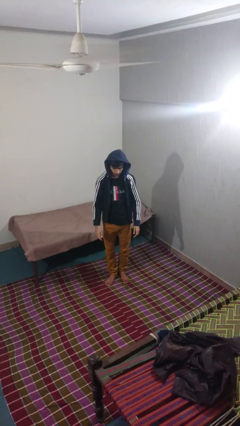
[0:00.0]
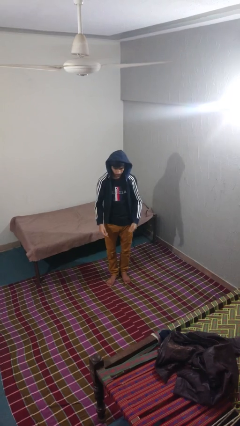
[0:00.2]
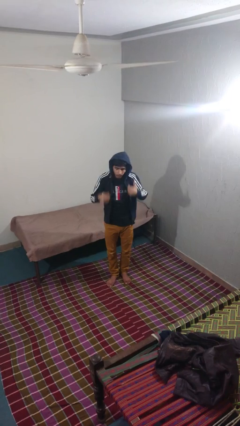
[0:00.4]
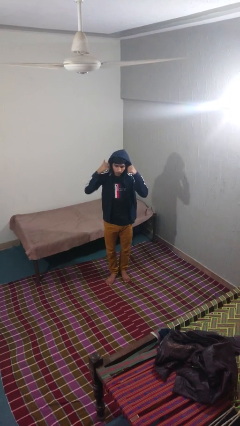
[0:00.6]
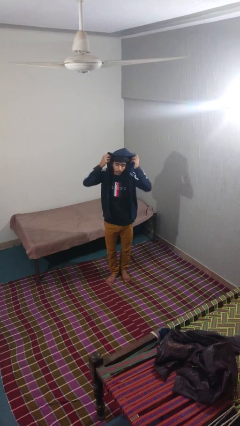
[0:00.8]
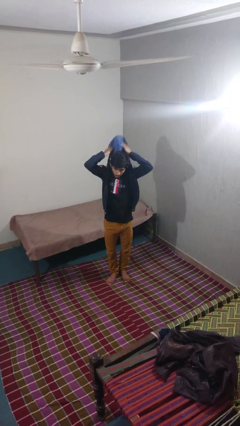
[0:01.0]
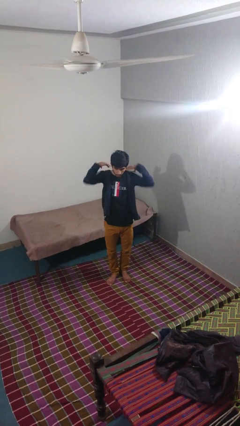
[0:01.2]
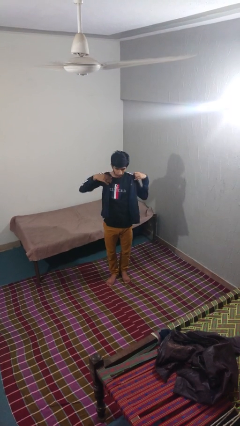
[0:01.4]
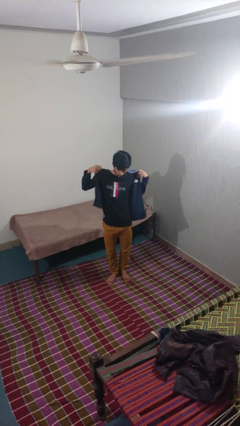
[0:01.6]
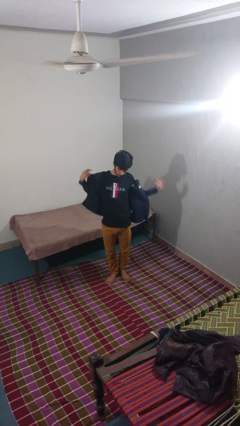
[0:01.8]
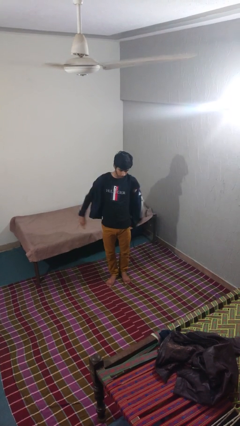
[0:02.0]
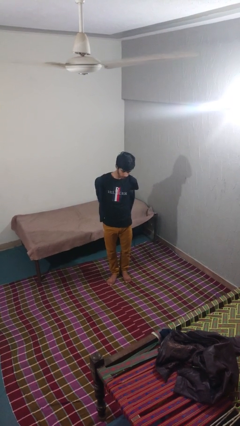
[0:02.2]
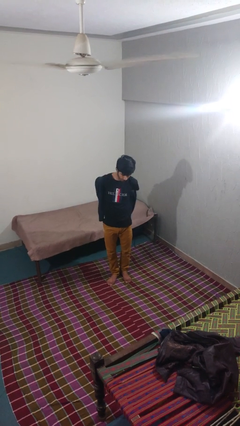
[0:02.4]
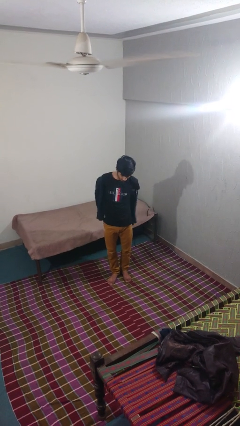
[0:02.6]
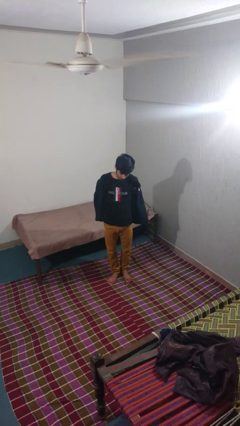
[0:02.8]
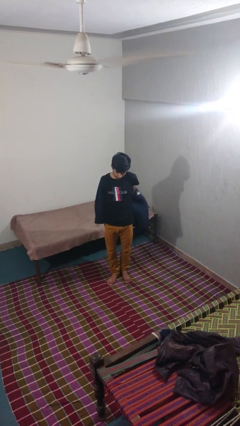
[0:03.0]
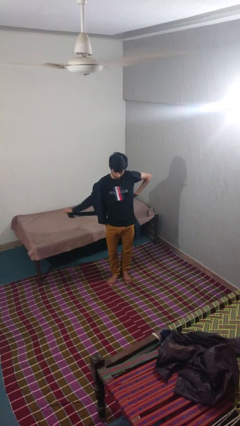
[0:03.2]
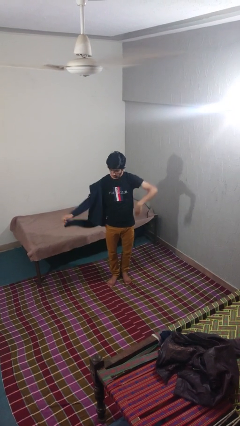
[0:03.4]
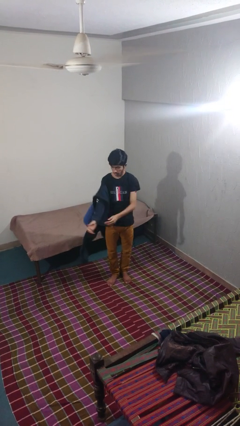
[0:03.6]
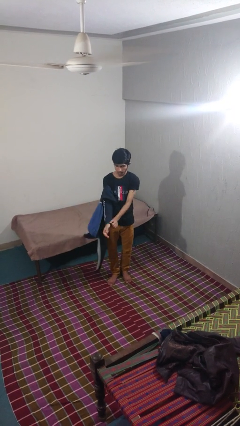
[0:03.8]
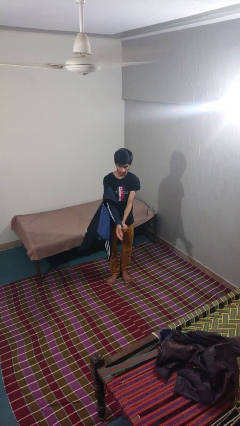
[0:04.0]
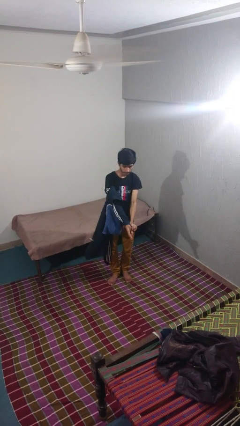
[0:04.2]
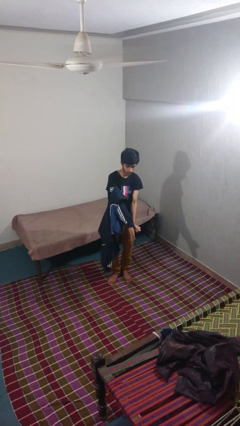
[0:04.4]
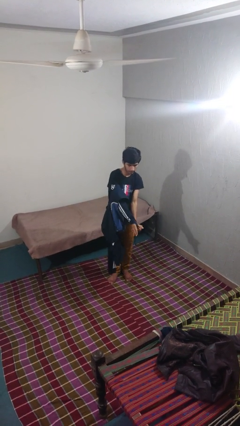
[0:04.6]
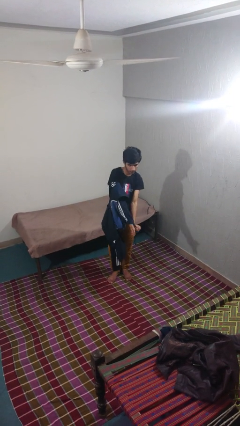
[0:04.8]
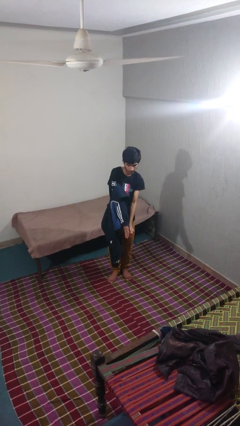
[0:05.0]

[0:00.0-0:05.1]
person takes off hoodie

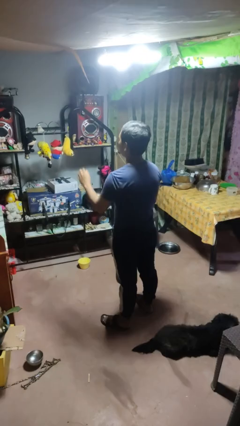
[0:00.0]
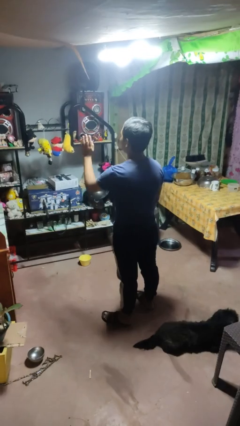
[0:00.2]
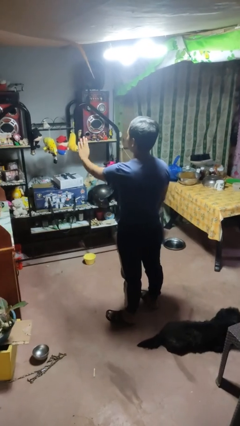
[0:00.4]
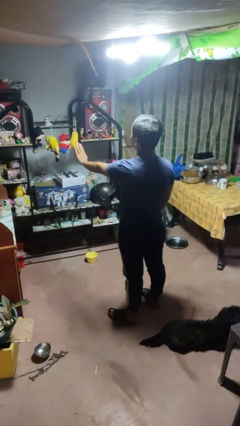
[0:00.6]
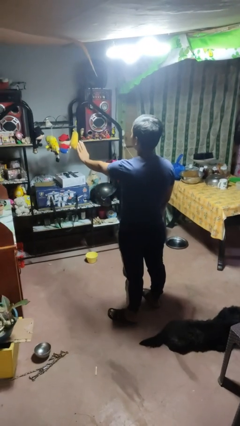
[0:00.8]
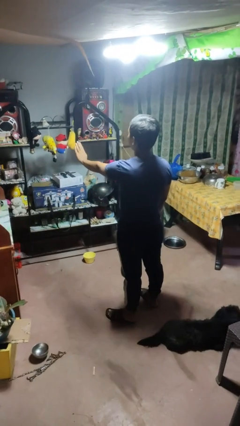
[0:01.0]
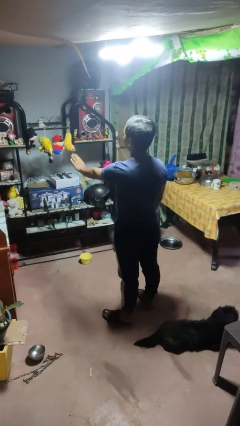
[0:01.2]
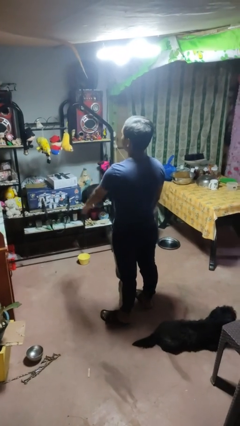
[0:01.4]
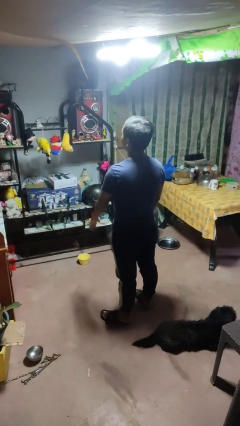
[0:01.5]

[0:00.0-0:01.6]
person gestures stop

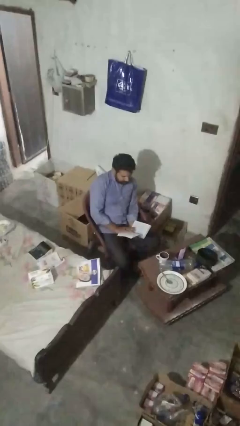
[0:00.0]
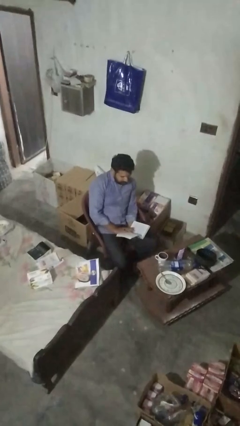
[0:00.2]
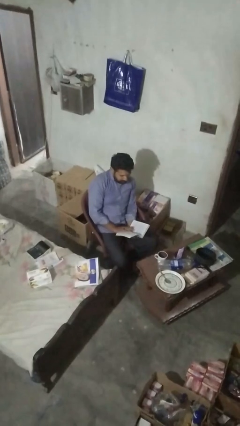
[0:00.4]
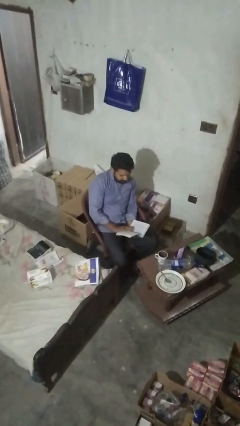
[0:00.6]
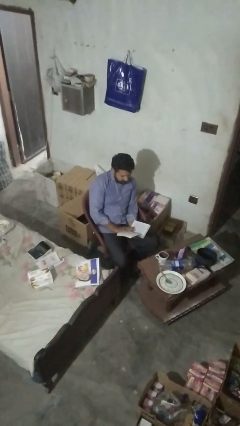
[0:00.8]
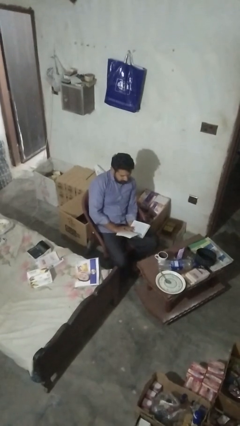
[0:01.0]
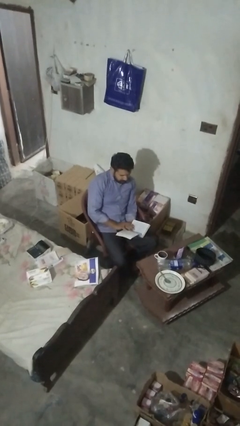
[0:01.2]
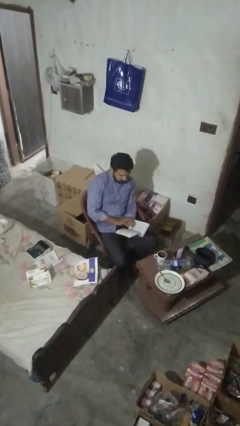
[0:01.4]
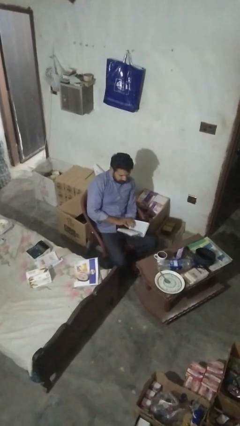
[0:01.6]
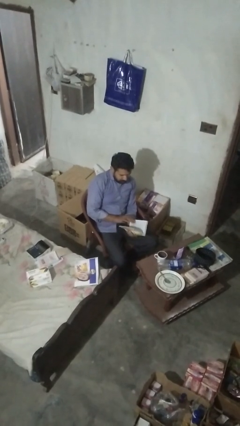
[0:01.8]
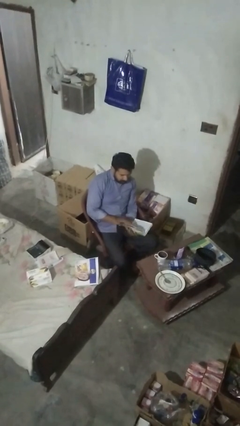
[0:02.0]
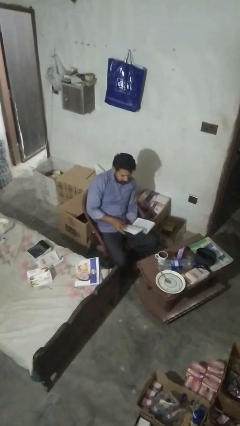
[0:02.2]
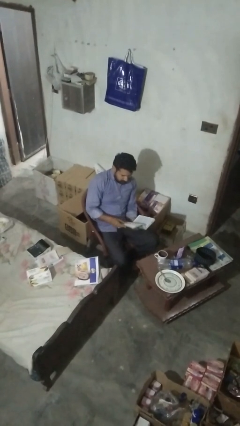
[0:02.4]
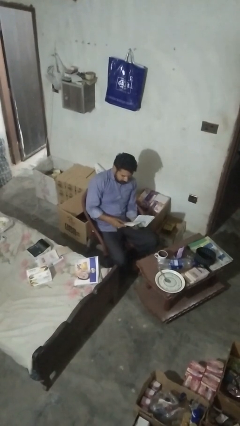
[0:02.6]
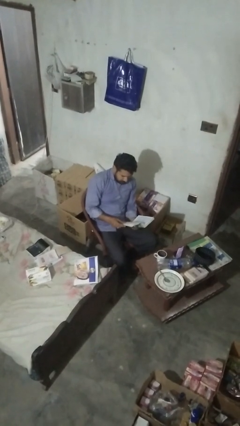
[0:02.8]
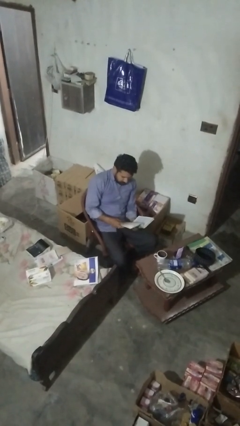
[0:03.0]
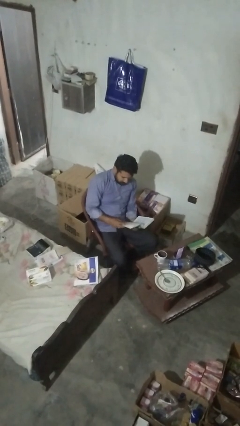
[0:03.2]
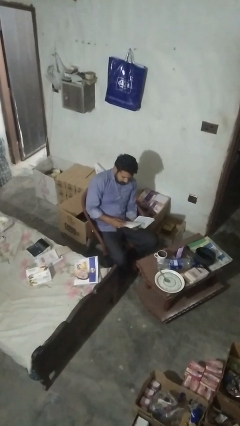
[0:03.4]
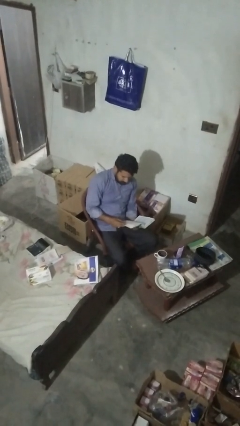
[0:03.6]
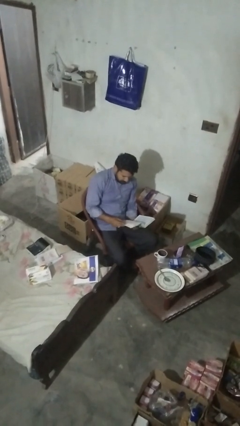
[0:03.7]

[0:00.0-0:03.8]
person reads book

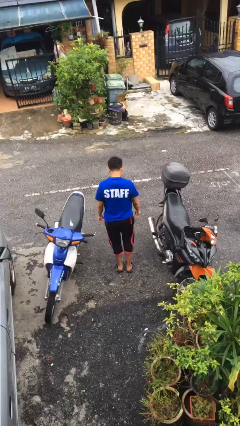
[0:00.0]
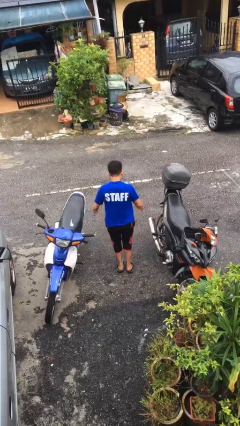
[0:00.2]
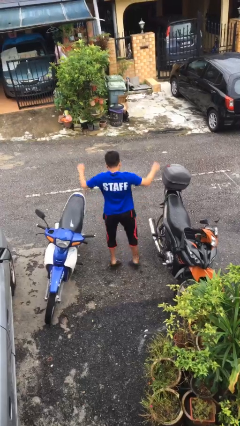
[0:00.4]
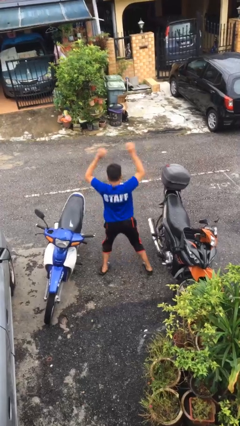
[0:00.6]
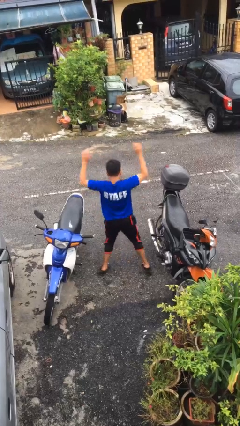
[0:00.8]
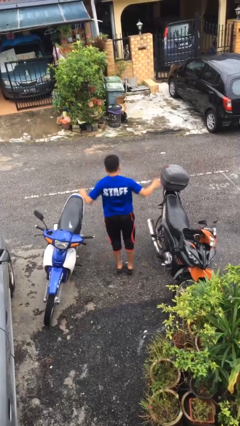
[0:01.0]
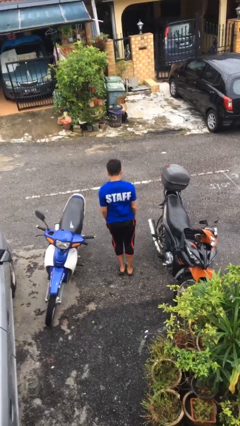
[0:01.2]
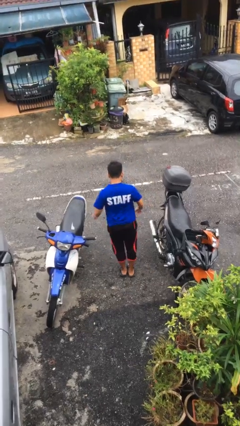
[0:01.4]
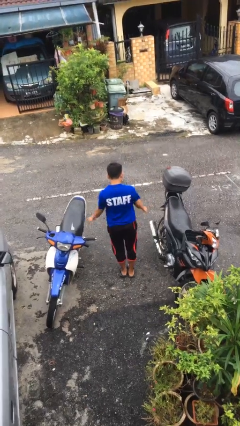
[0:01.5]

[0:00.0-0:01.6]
person exercises with jumping jacks

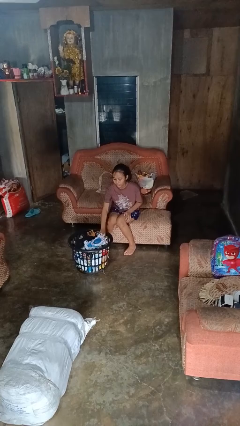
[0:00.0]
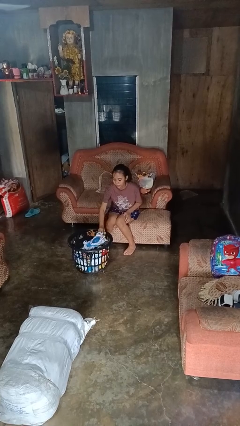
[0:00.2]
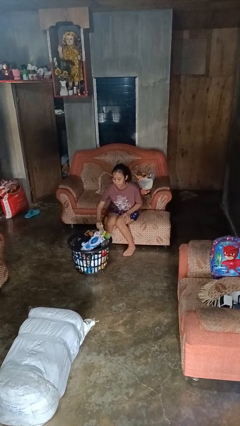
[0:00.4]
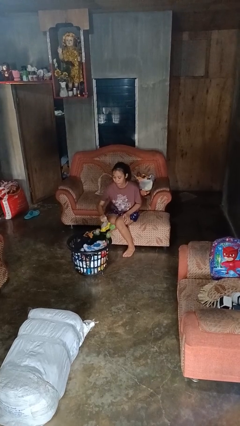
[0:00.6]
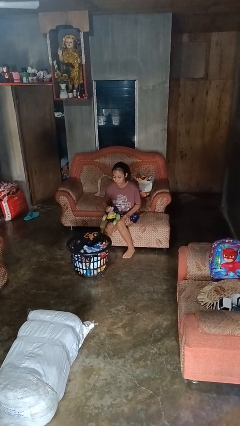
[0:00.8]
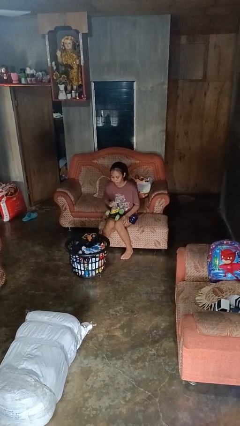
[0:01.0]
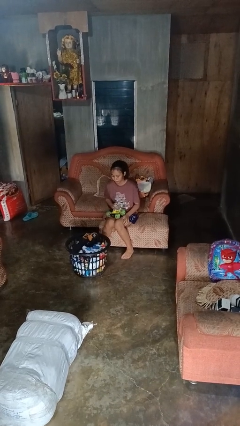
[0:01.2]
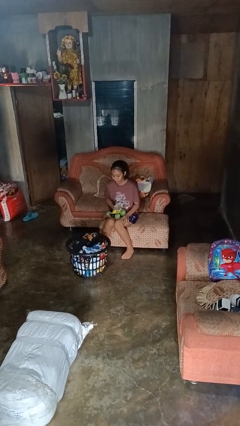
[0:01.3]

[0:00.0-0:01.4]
person takes object from basket

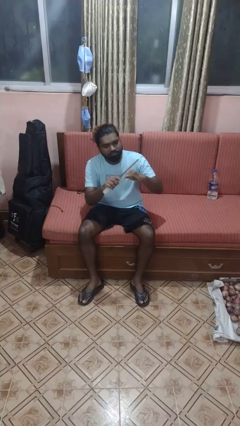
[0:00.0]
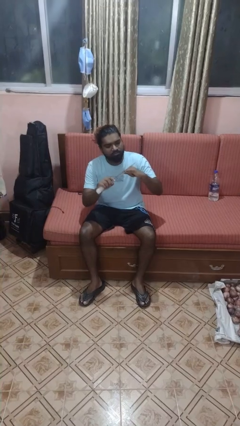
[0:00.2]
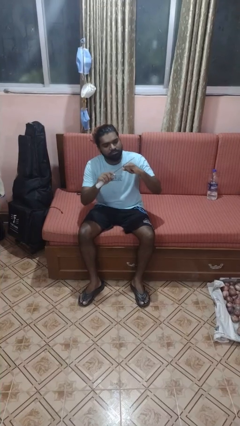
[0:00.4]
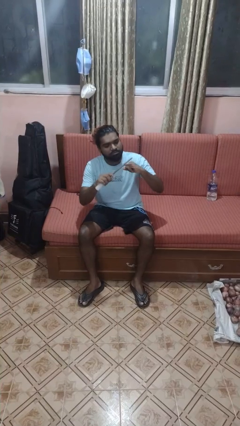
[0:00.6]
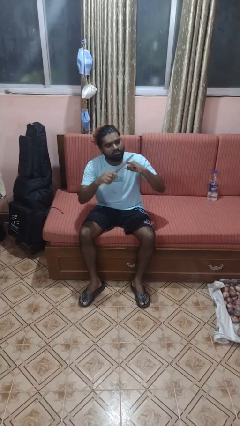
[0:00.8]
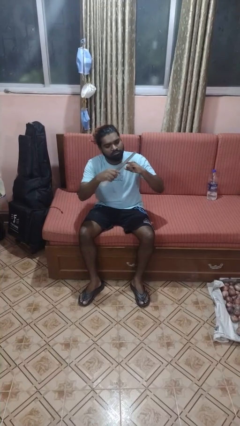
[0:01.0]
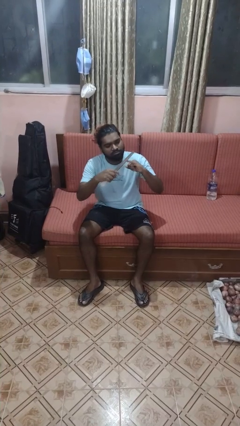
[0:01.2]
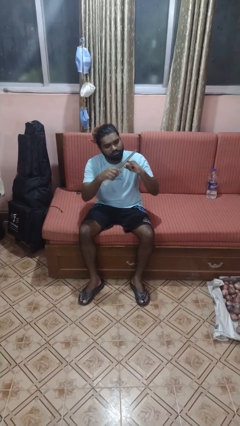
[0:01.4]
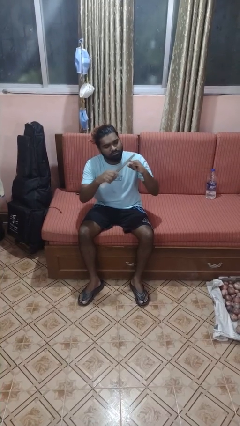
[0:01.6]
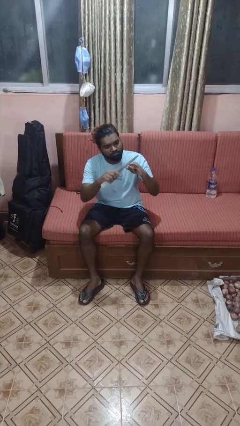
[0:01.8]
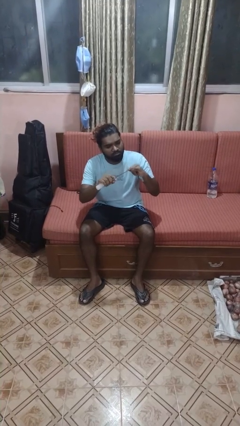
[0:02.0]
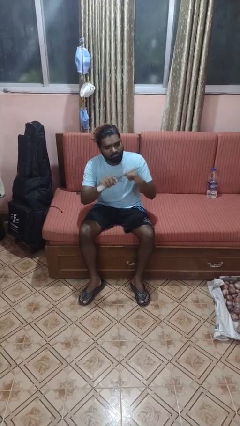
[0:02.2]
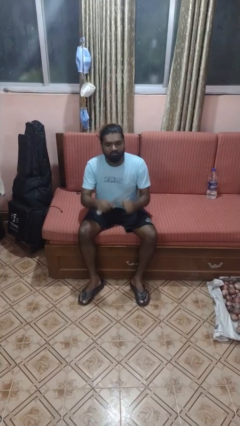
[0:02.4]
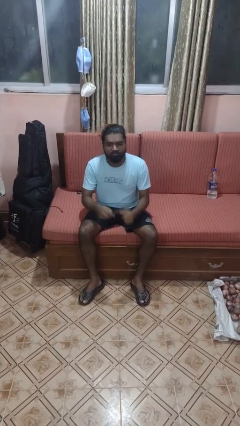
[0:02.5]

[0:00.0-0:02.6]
person files fingernails

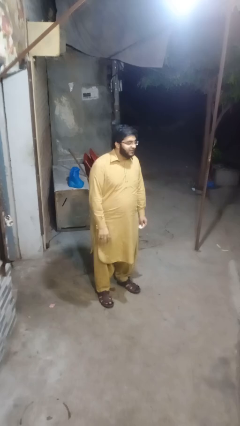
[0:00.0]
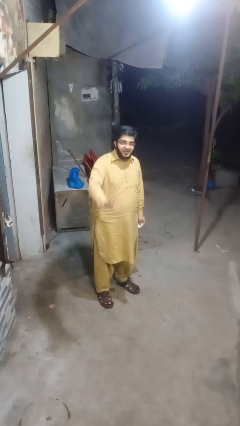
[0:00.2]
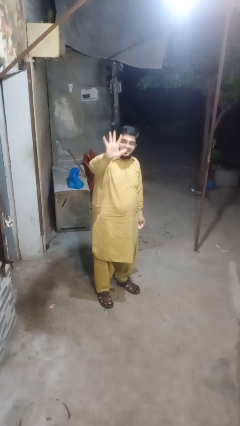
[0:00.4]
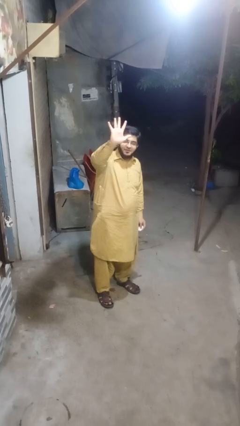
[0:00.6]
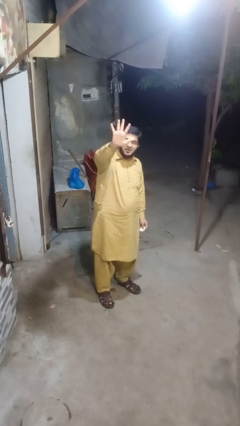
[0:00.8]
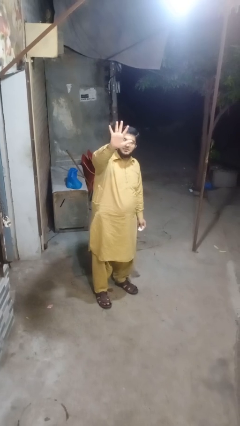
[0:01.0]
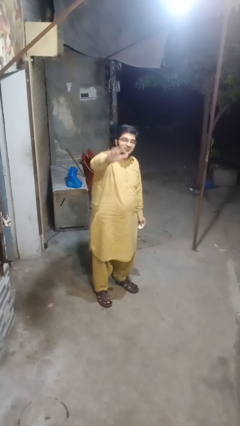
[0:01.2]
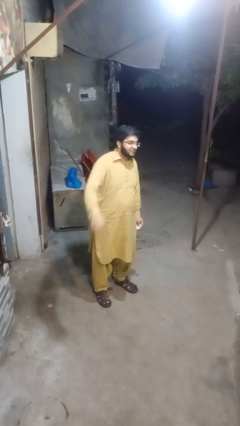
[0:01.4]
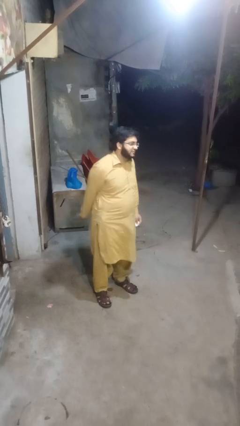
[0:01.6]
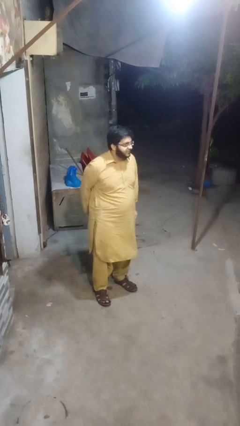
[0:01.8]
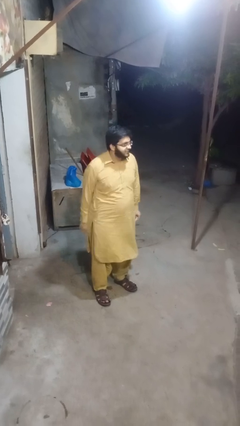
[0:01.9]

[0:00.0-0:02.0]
person gestures number five
